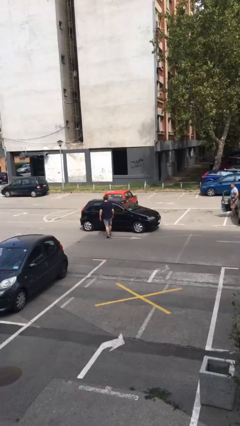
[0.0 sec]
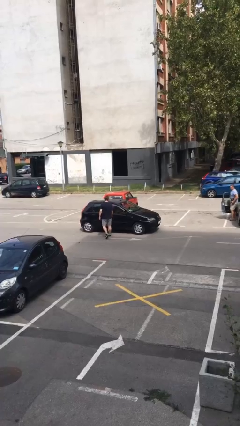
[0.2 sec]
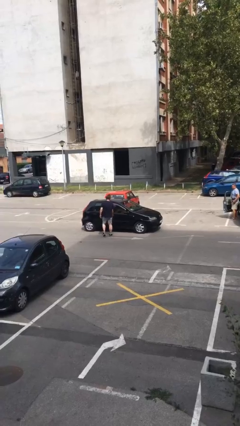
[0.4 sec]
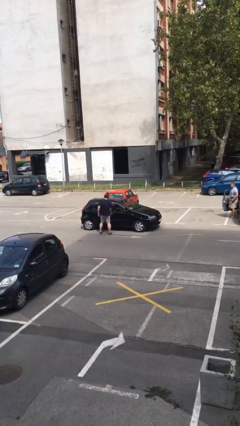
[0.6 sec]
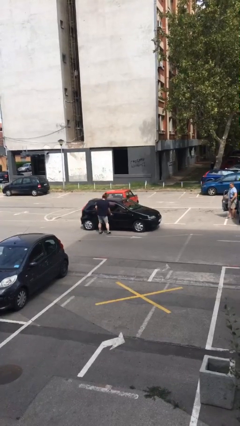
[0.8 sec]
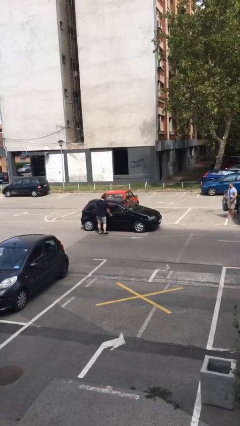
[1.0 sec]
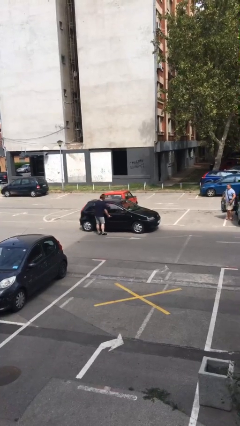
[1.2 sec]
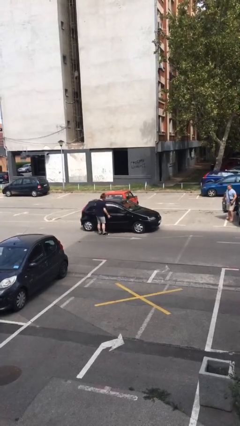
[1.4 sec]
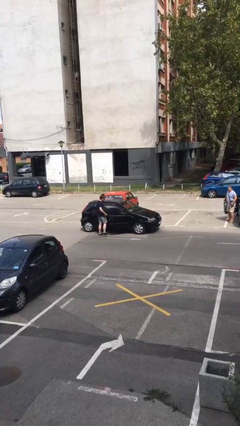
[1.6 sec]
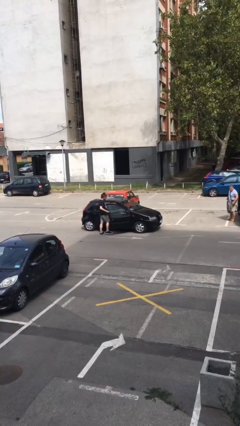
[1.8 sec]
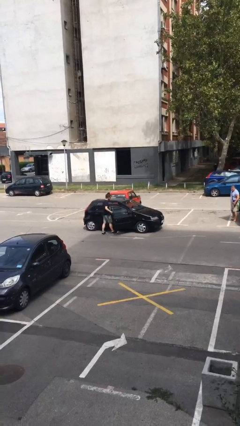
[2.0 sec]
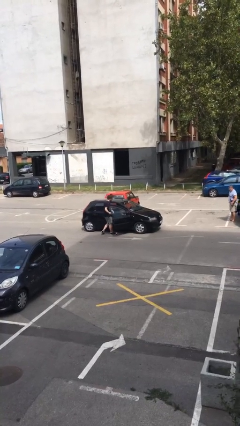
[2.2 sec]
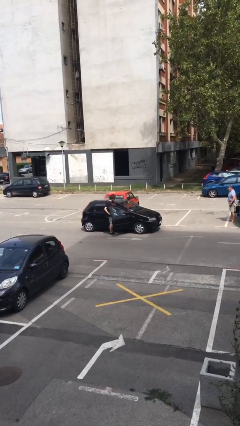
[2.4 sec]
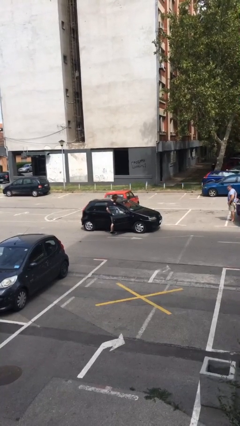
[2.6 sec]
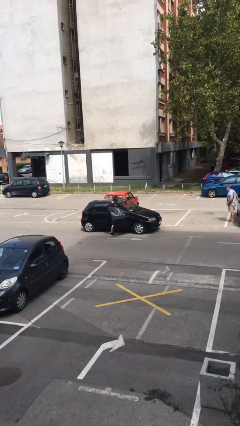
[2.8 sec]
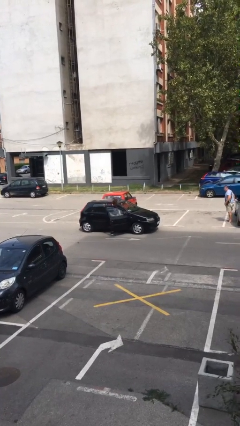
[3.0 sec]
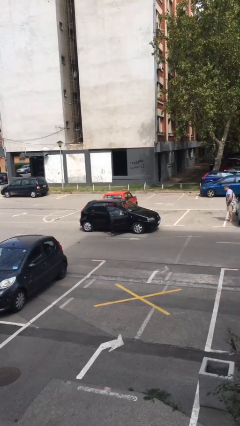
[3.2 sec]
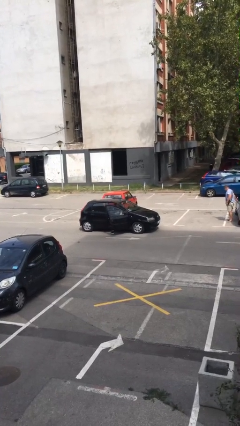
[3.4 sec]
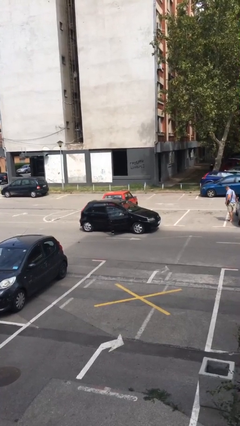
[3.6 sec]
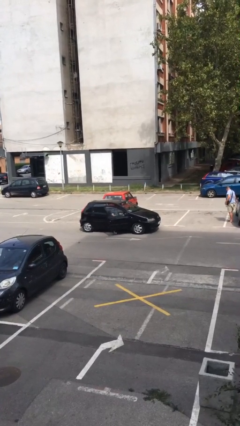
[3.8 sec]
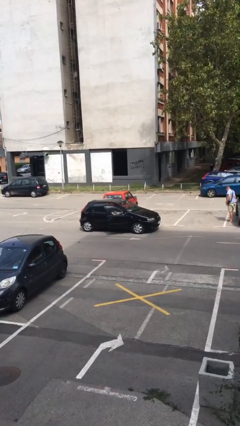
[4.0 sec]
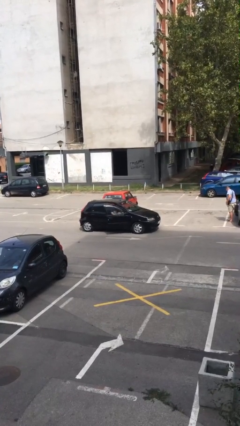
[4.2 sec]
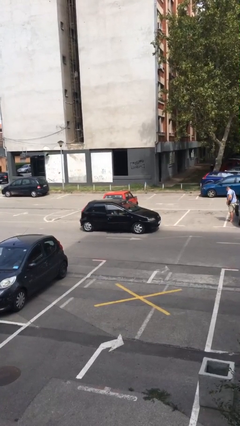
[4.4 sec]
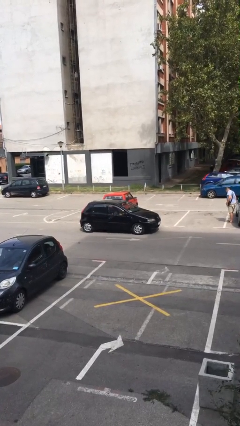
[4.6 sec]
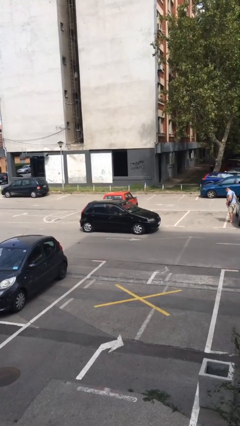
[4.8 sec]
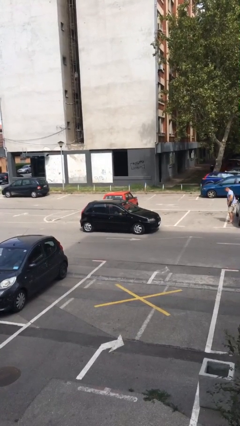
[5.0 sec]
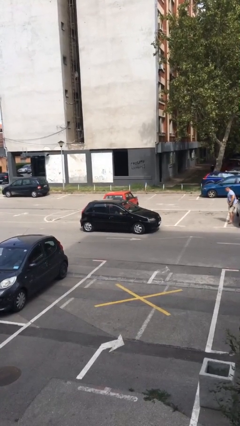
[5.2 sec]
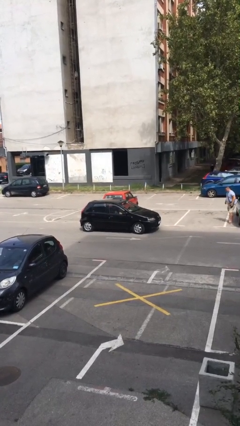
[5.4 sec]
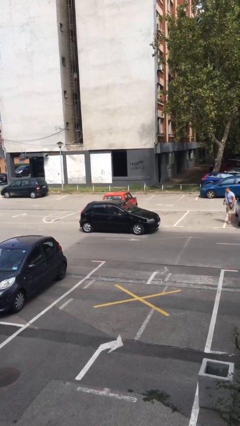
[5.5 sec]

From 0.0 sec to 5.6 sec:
car picks up person

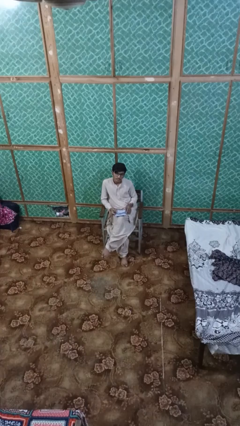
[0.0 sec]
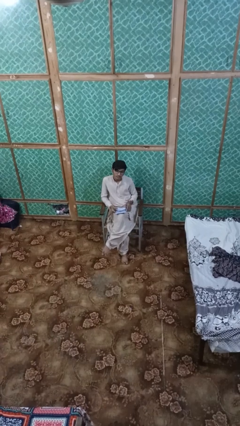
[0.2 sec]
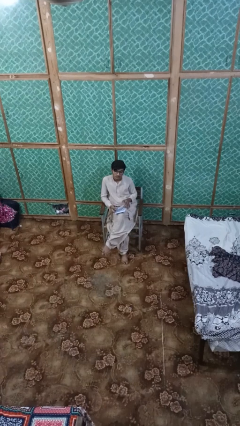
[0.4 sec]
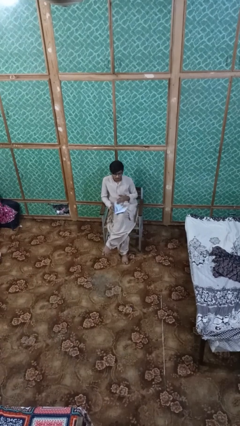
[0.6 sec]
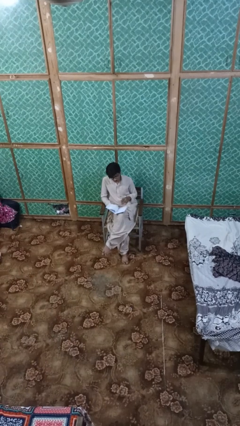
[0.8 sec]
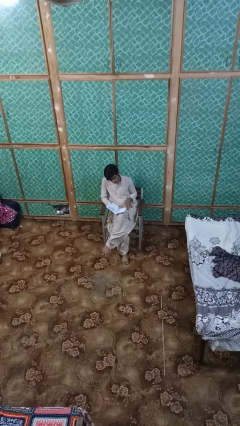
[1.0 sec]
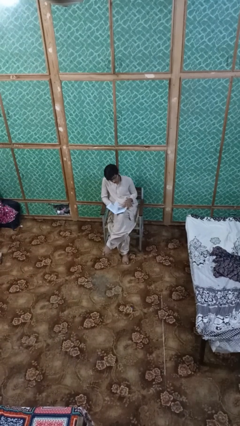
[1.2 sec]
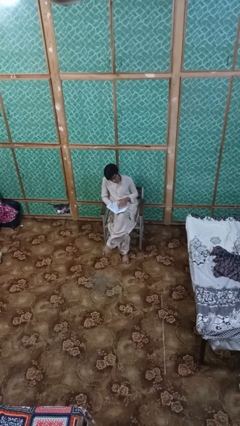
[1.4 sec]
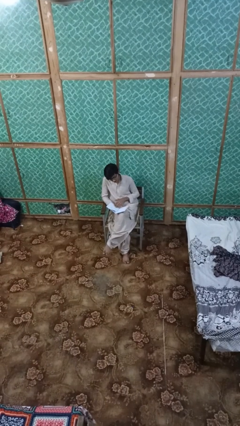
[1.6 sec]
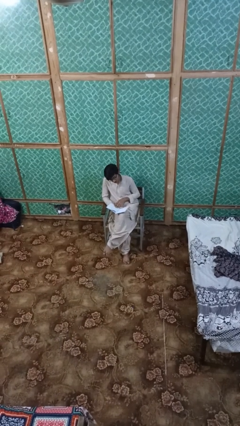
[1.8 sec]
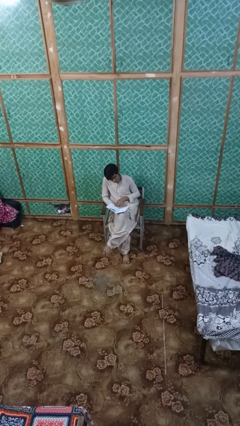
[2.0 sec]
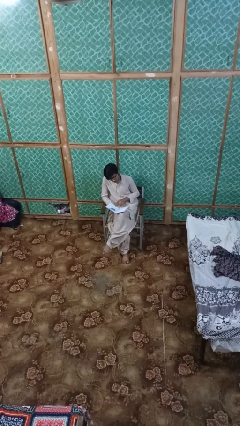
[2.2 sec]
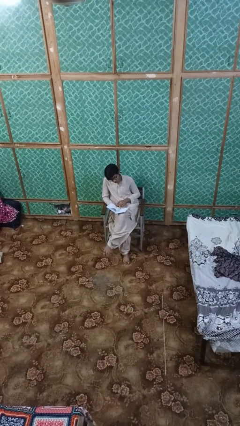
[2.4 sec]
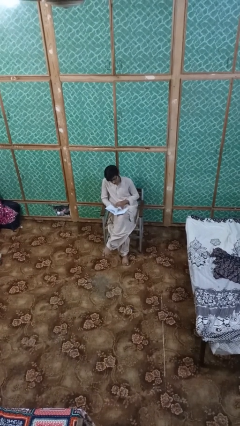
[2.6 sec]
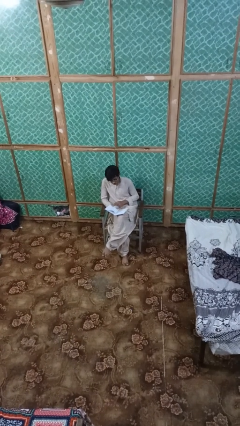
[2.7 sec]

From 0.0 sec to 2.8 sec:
person reads magazine

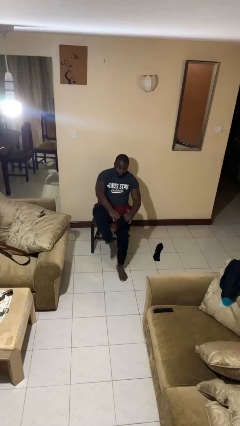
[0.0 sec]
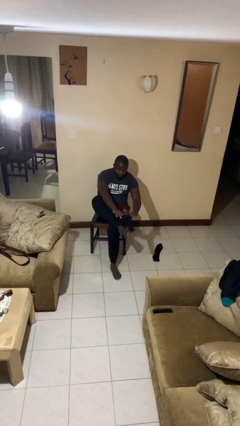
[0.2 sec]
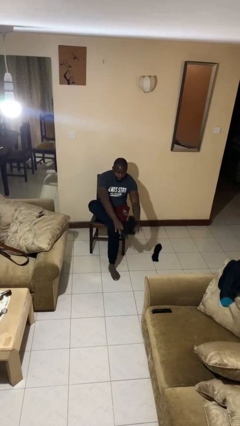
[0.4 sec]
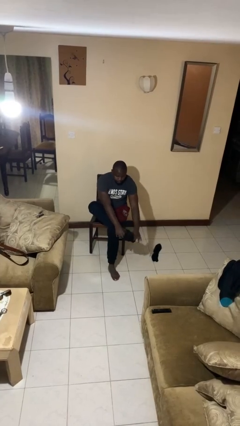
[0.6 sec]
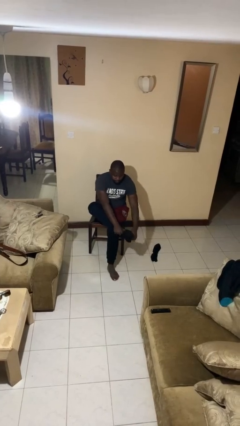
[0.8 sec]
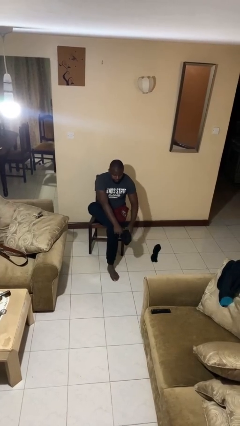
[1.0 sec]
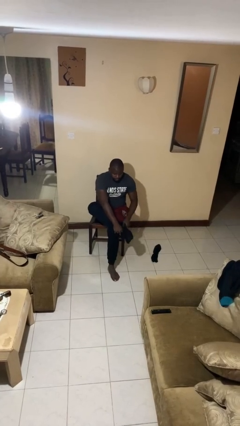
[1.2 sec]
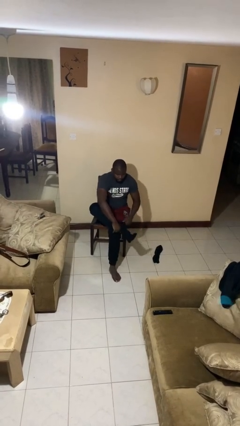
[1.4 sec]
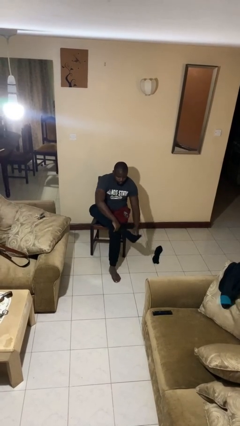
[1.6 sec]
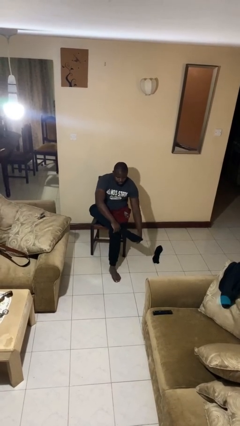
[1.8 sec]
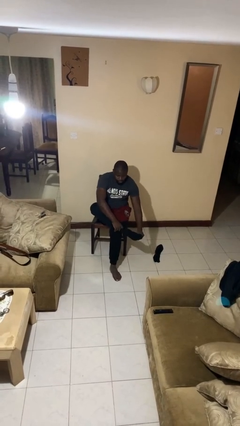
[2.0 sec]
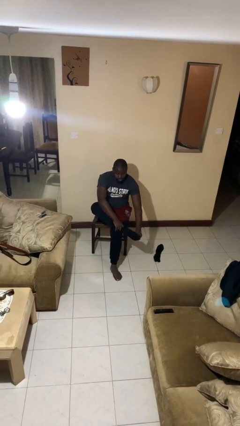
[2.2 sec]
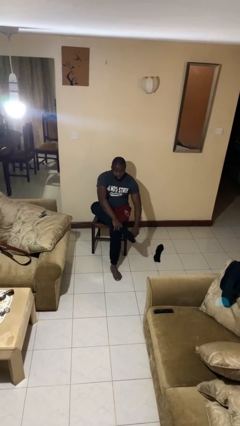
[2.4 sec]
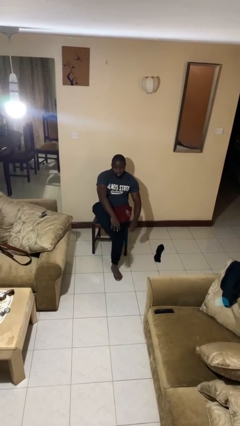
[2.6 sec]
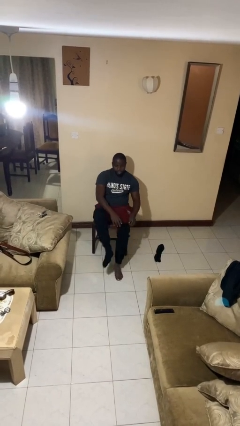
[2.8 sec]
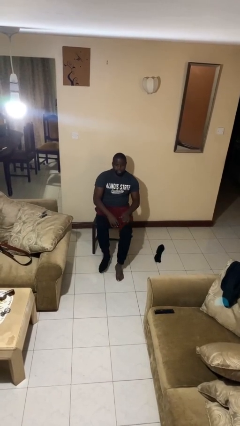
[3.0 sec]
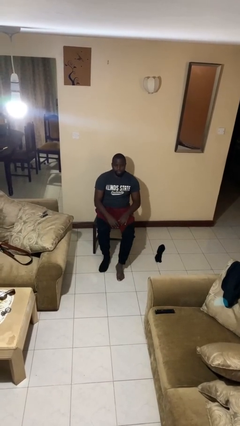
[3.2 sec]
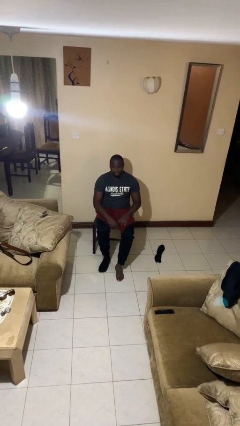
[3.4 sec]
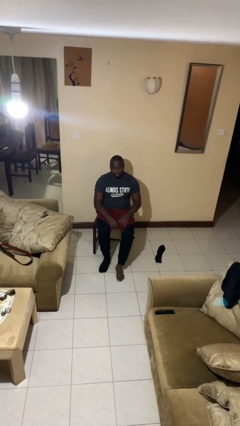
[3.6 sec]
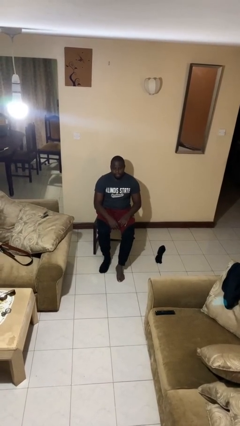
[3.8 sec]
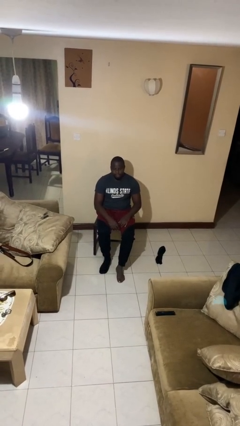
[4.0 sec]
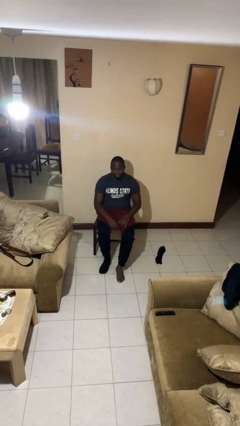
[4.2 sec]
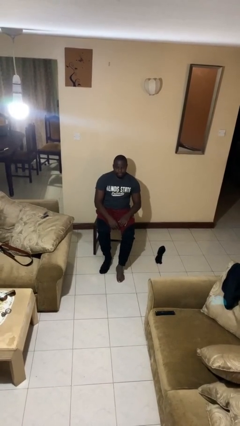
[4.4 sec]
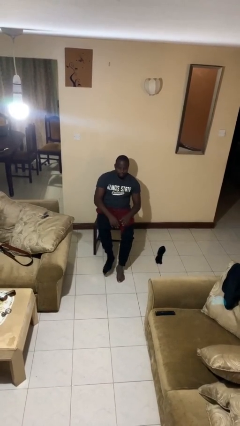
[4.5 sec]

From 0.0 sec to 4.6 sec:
person puts on socks

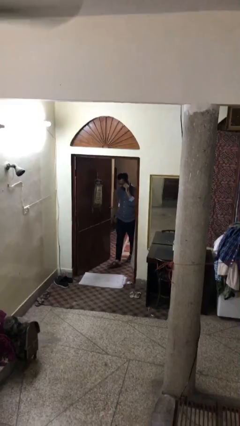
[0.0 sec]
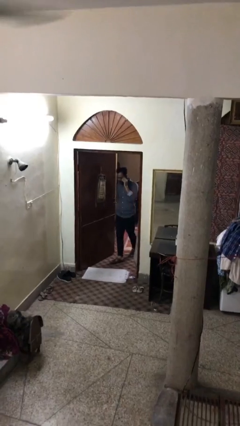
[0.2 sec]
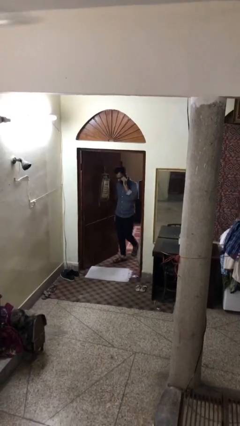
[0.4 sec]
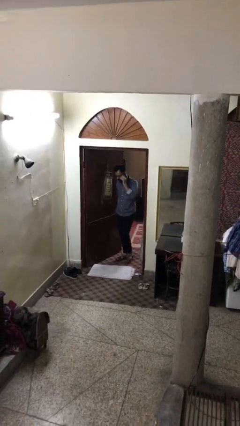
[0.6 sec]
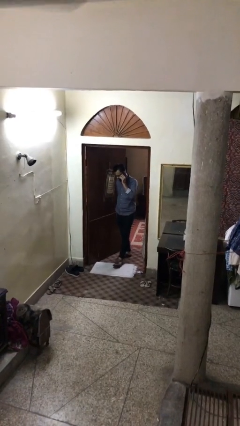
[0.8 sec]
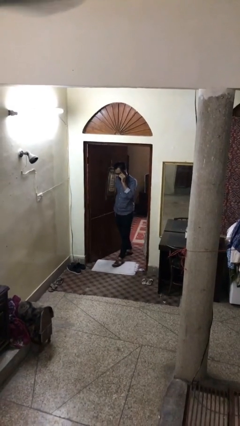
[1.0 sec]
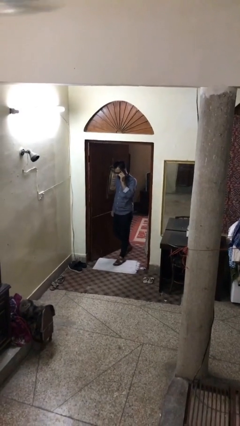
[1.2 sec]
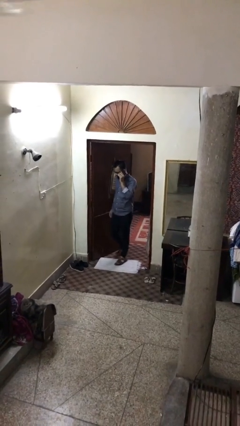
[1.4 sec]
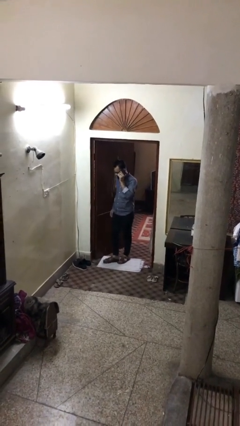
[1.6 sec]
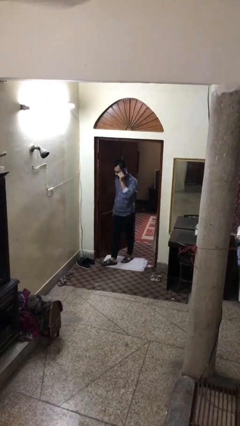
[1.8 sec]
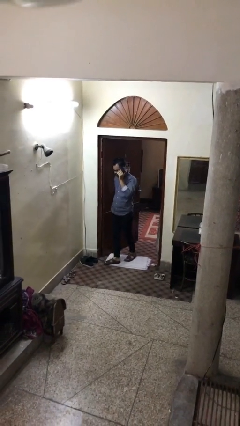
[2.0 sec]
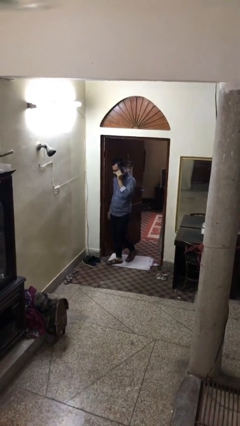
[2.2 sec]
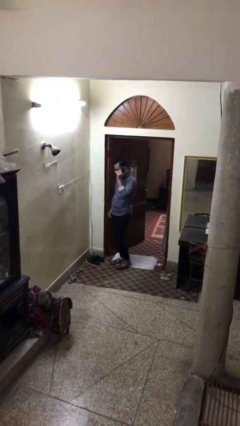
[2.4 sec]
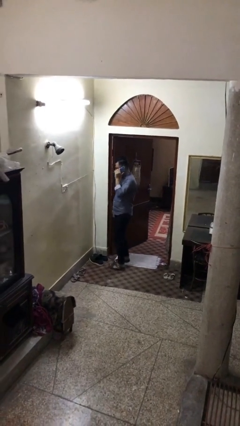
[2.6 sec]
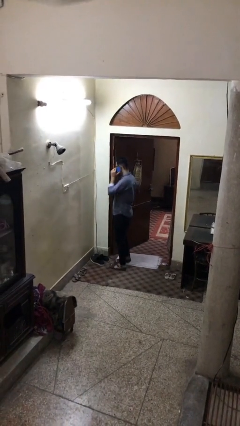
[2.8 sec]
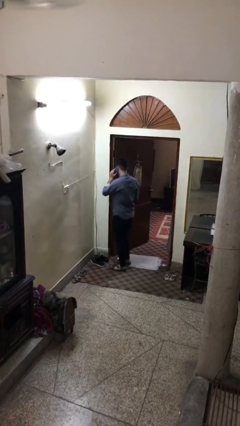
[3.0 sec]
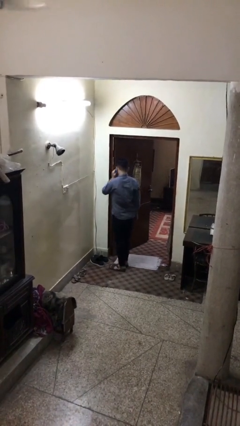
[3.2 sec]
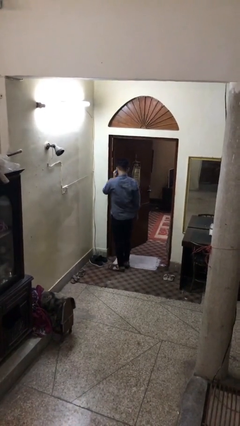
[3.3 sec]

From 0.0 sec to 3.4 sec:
person enters scene through structure

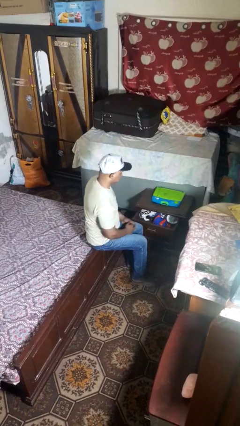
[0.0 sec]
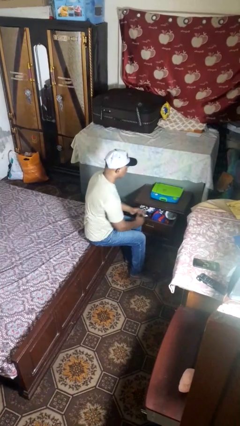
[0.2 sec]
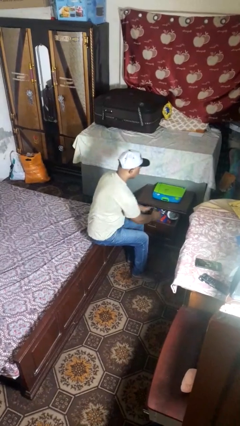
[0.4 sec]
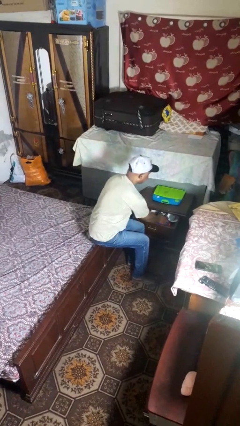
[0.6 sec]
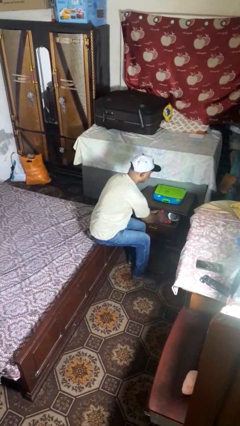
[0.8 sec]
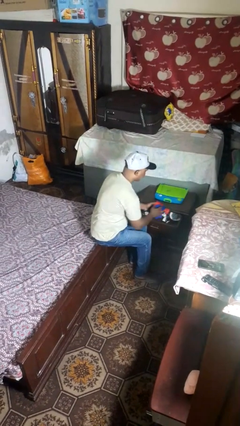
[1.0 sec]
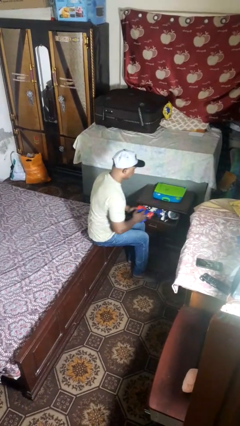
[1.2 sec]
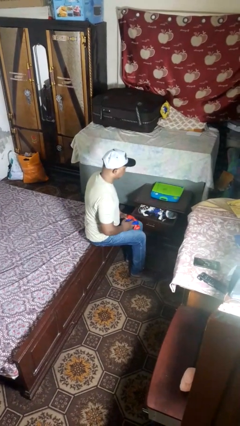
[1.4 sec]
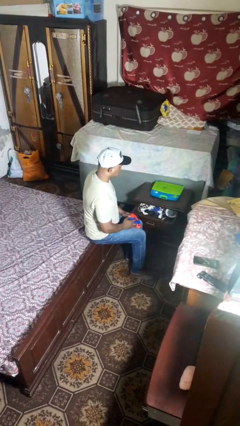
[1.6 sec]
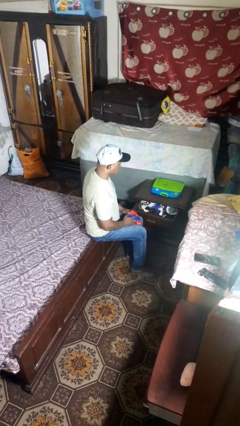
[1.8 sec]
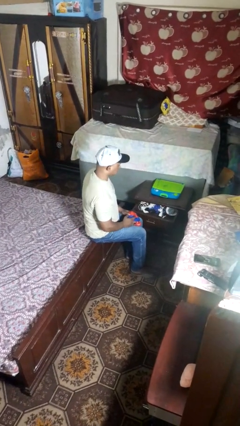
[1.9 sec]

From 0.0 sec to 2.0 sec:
person takes clothes from dresser
